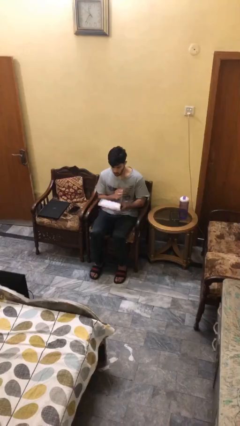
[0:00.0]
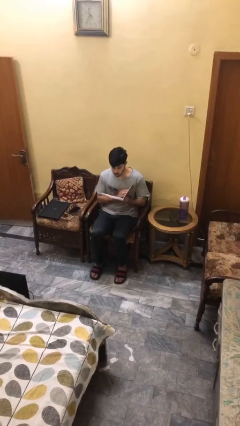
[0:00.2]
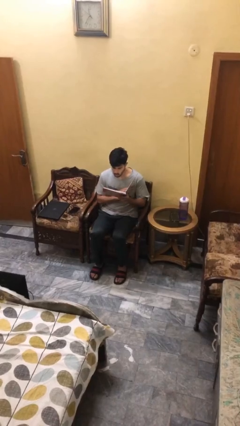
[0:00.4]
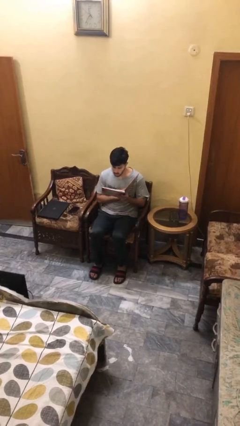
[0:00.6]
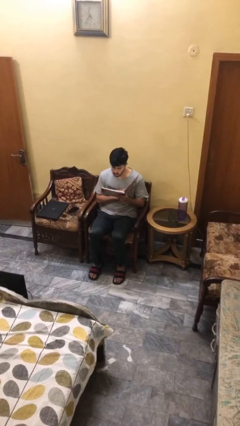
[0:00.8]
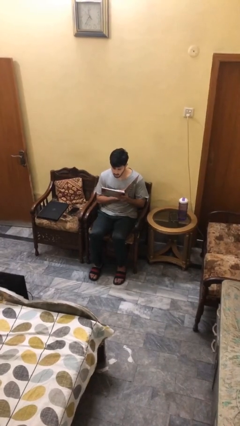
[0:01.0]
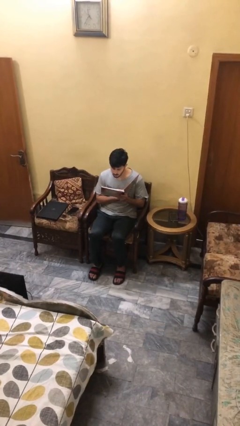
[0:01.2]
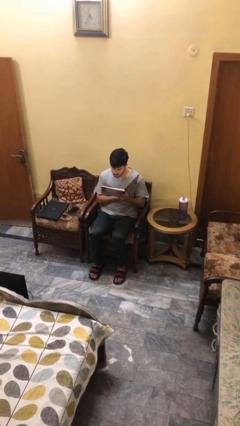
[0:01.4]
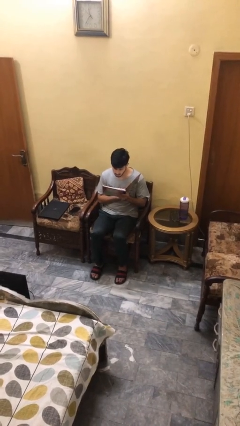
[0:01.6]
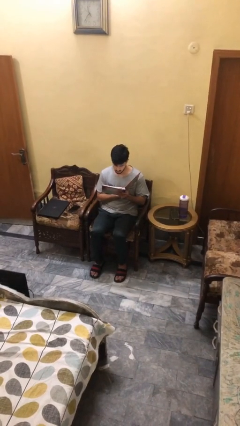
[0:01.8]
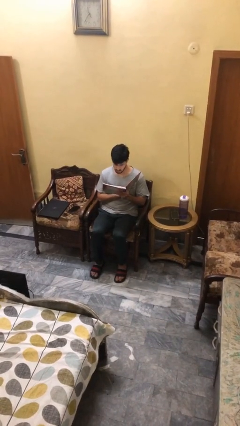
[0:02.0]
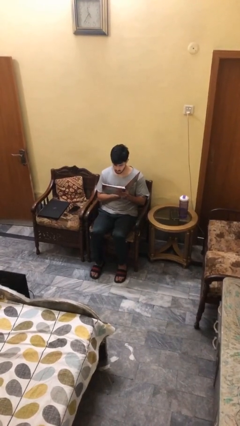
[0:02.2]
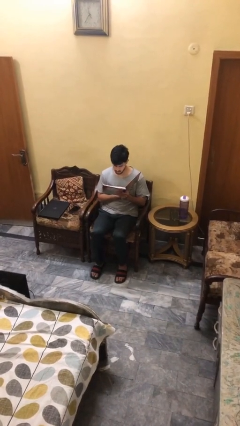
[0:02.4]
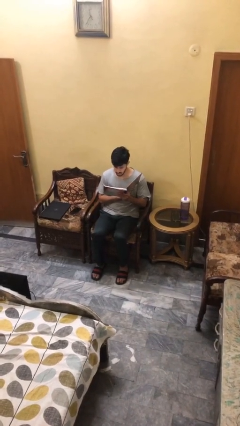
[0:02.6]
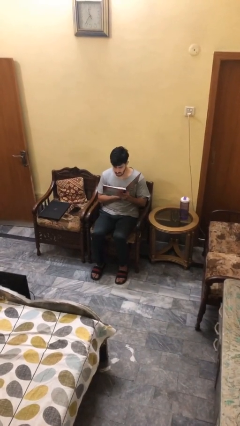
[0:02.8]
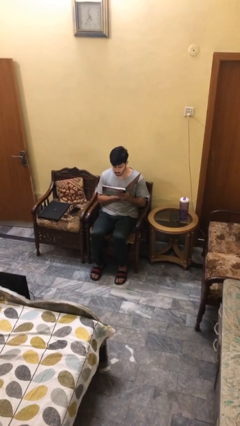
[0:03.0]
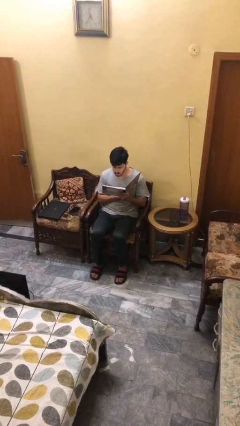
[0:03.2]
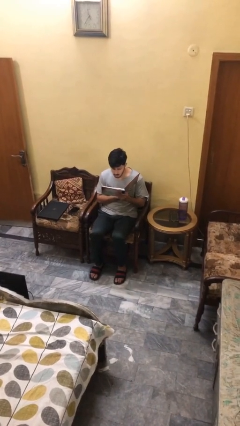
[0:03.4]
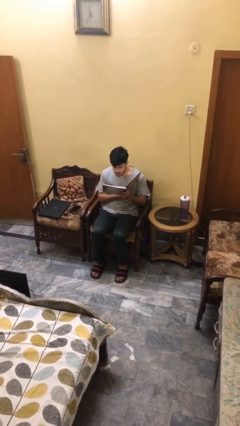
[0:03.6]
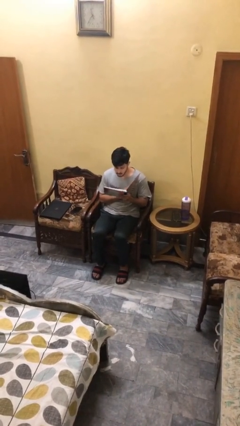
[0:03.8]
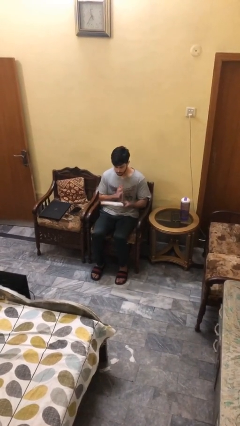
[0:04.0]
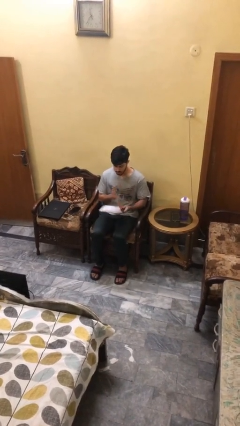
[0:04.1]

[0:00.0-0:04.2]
person reads document

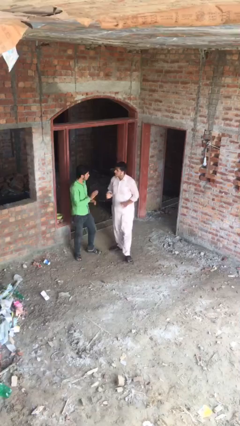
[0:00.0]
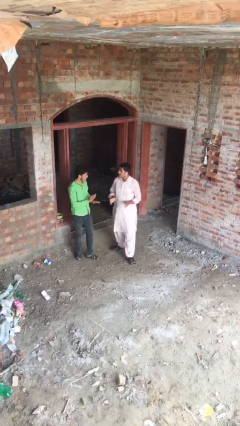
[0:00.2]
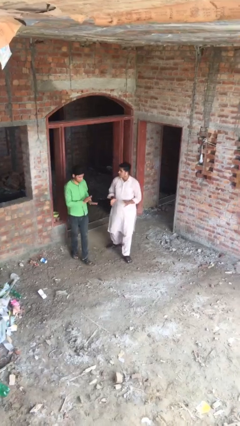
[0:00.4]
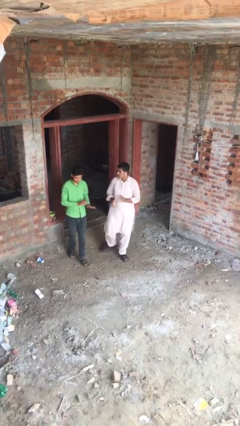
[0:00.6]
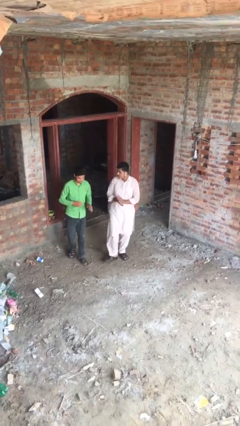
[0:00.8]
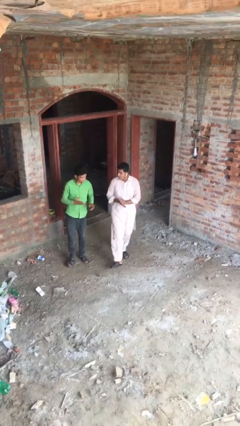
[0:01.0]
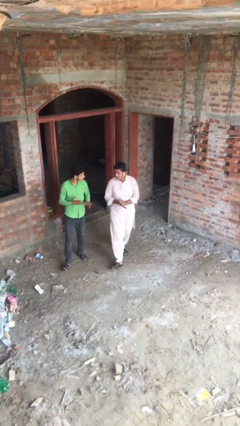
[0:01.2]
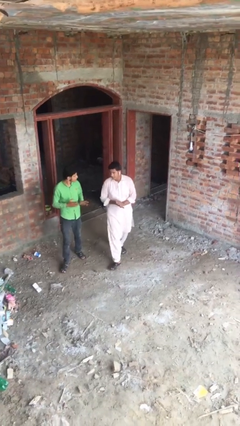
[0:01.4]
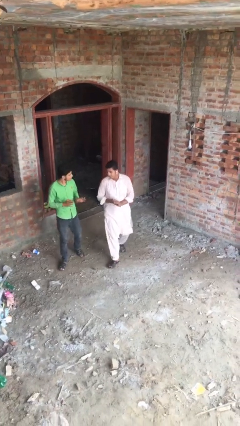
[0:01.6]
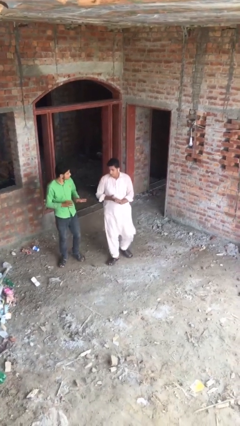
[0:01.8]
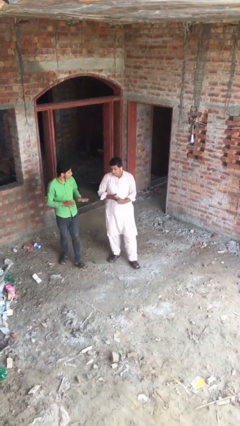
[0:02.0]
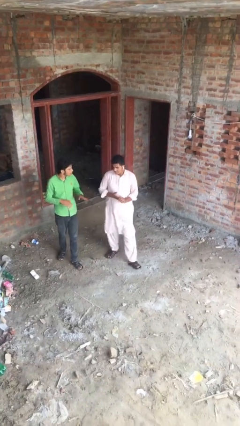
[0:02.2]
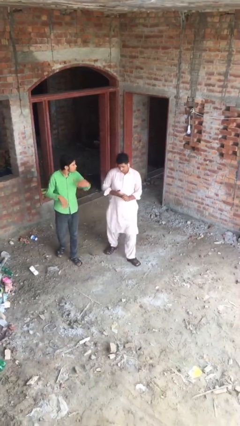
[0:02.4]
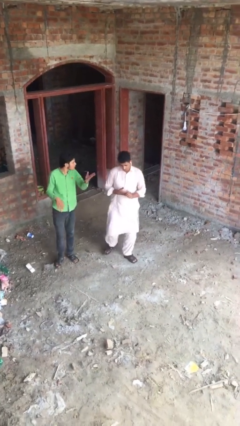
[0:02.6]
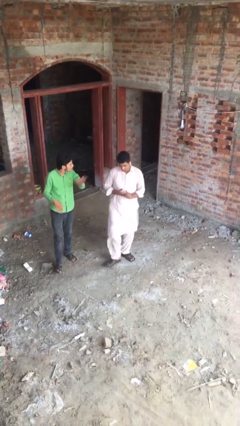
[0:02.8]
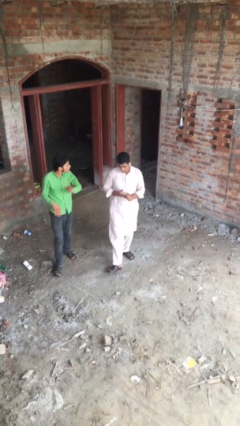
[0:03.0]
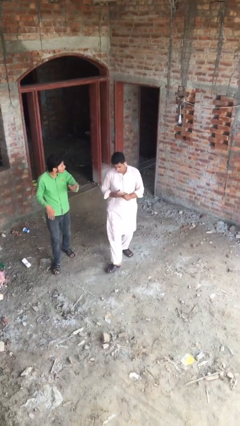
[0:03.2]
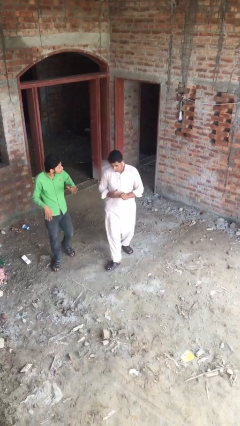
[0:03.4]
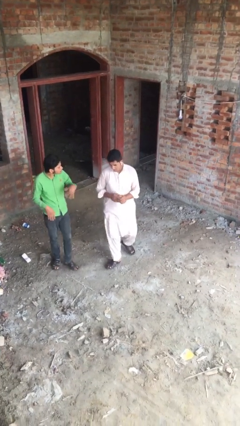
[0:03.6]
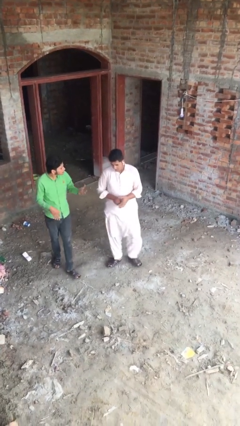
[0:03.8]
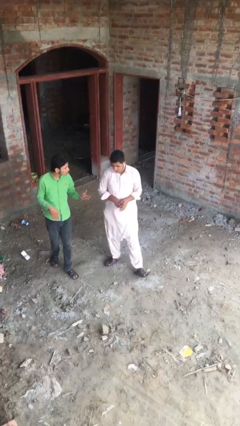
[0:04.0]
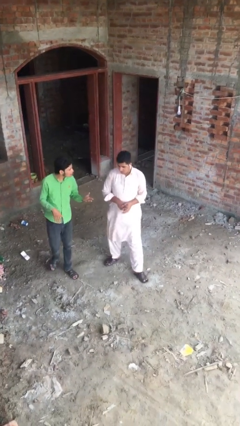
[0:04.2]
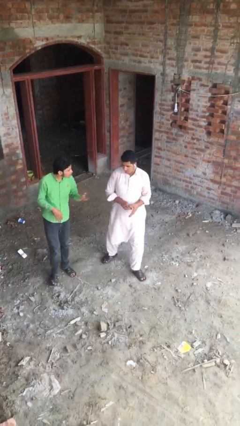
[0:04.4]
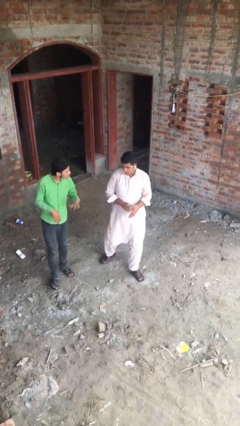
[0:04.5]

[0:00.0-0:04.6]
person talks to person

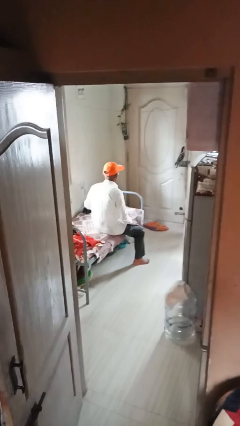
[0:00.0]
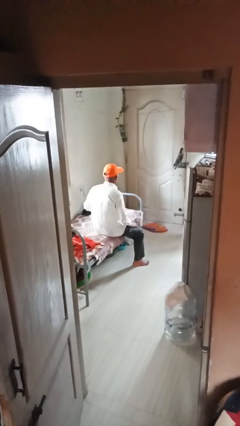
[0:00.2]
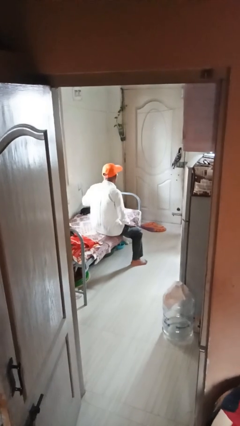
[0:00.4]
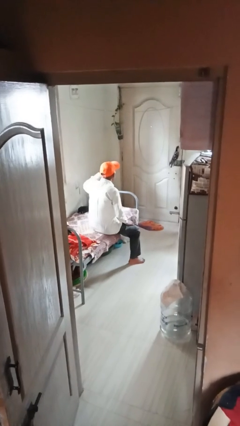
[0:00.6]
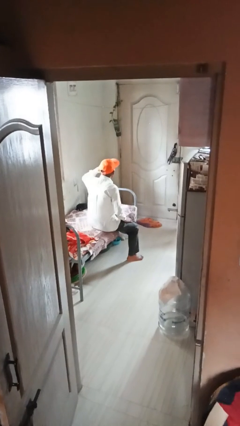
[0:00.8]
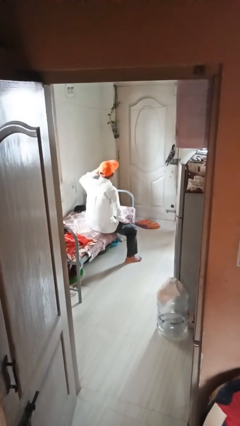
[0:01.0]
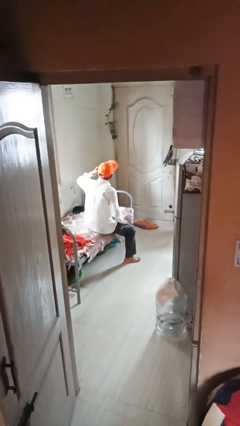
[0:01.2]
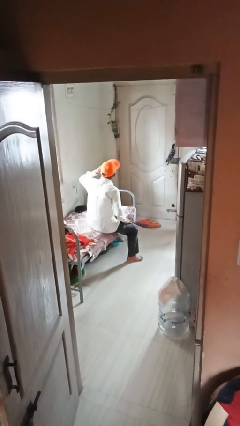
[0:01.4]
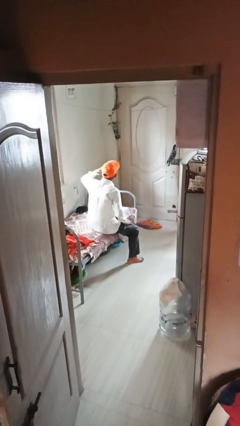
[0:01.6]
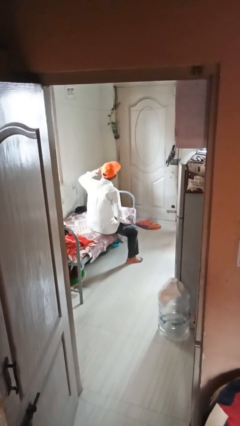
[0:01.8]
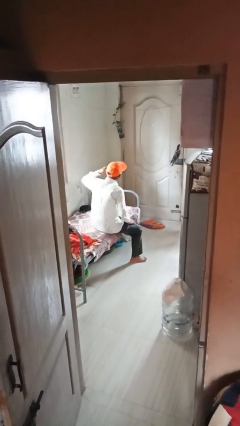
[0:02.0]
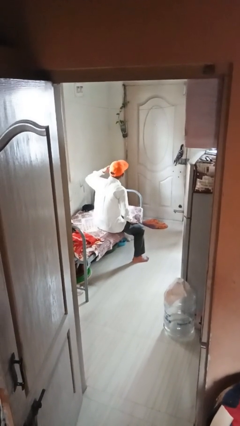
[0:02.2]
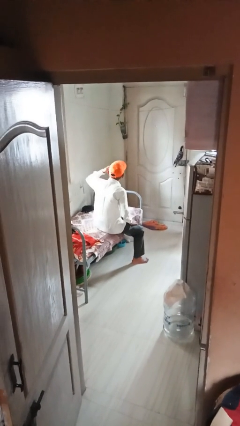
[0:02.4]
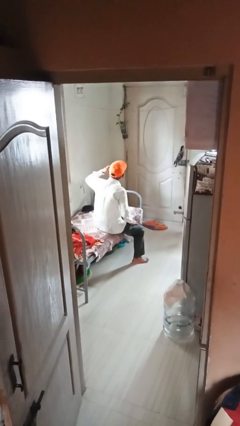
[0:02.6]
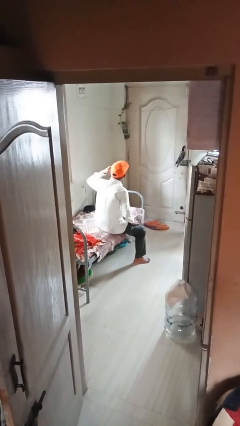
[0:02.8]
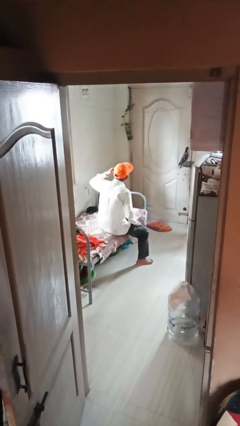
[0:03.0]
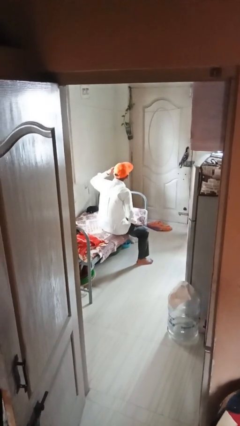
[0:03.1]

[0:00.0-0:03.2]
person rubs eyes

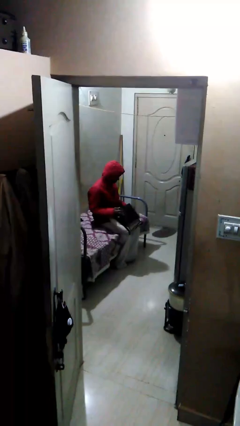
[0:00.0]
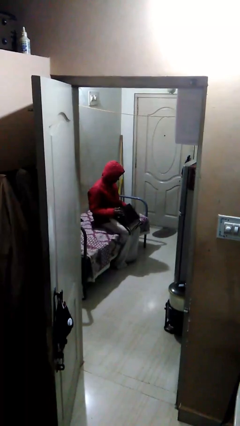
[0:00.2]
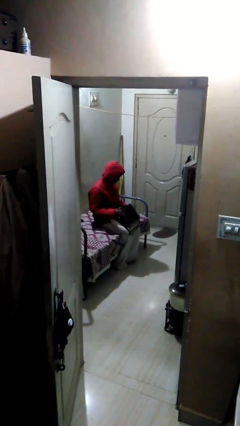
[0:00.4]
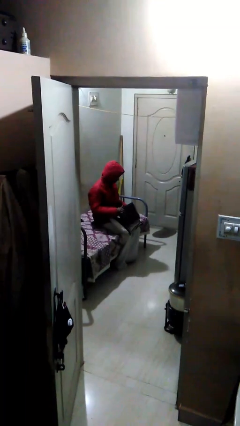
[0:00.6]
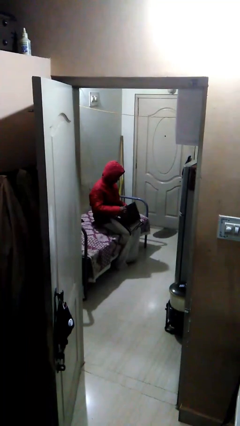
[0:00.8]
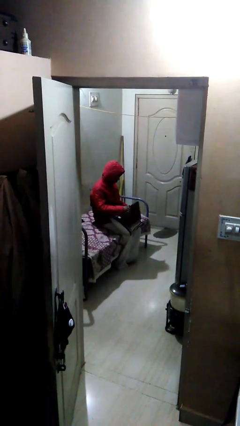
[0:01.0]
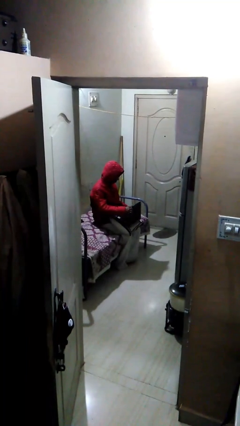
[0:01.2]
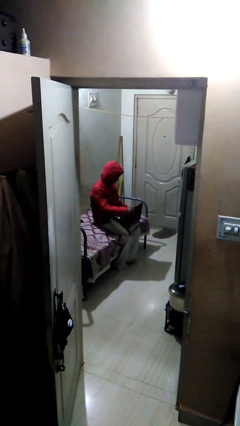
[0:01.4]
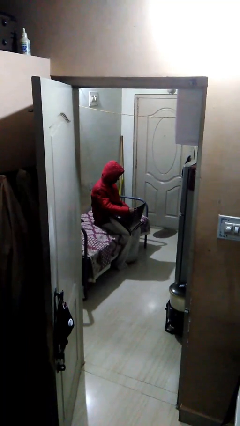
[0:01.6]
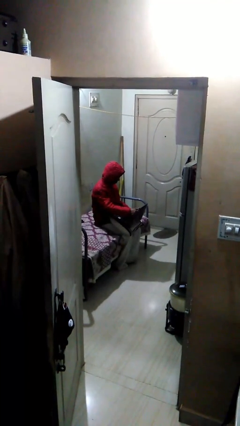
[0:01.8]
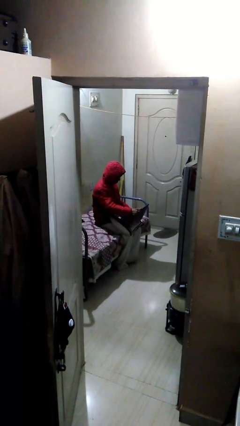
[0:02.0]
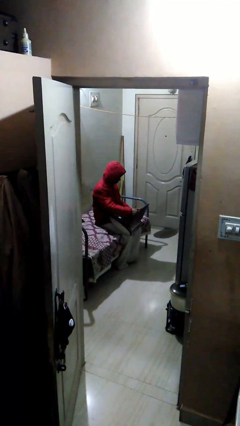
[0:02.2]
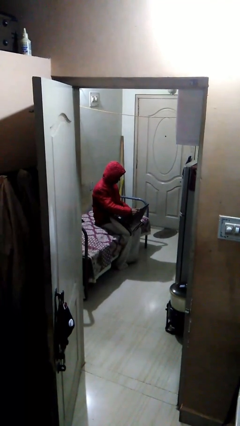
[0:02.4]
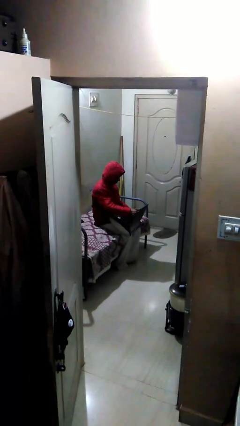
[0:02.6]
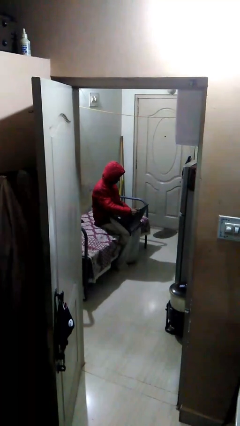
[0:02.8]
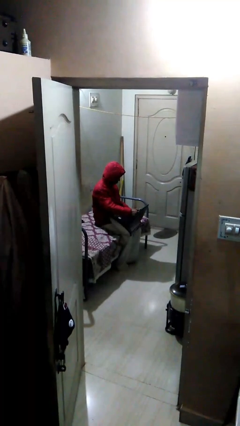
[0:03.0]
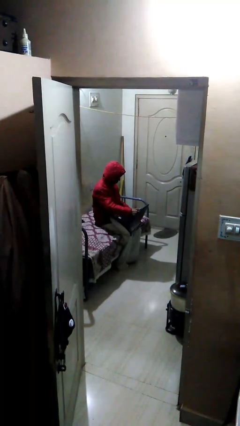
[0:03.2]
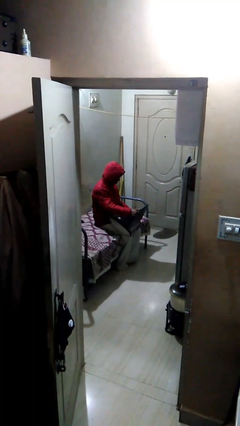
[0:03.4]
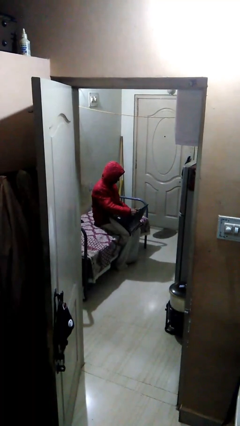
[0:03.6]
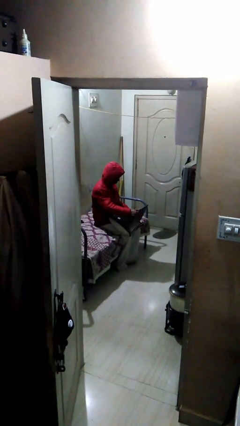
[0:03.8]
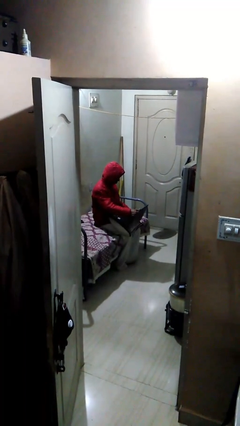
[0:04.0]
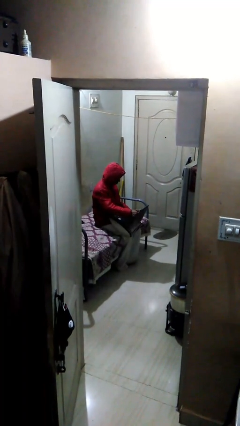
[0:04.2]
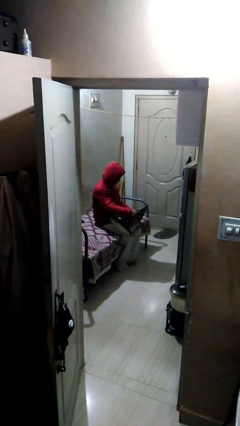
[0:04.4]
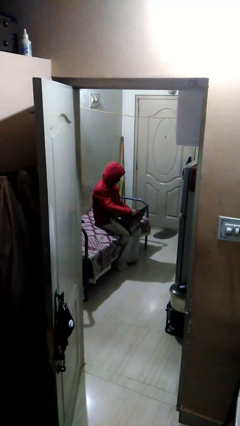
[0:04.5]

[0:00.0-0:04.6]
person interacts with laptop

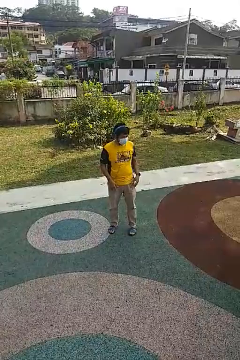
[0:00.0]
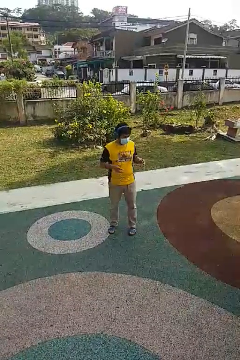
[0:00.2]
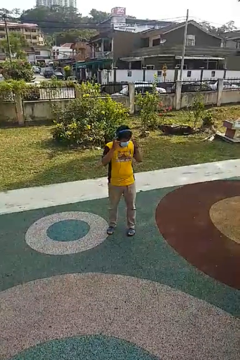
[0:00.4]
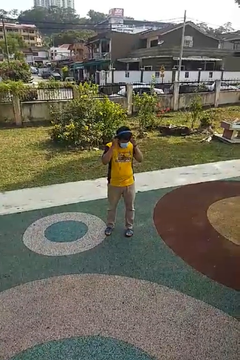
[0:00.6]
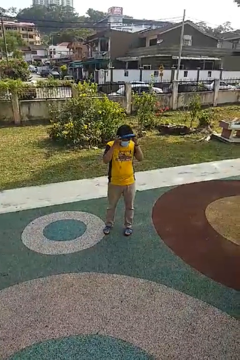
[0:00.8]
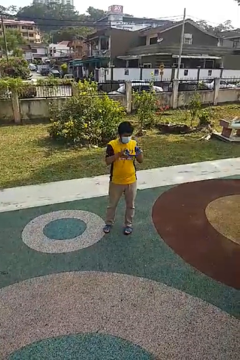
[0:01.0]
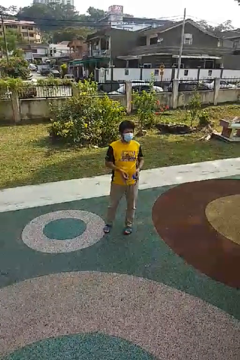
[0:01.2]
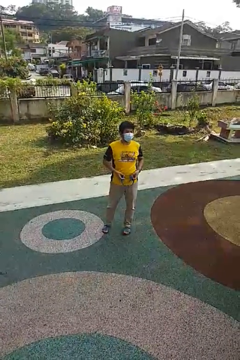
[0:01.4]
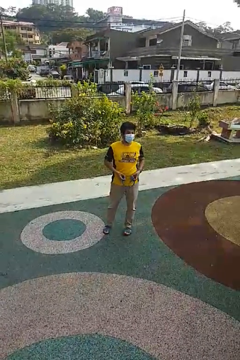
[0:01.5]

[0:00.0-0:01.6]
person takes off headphones
